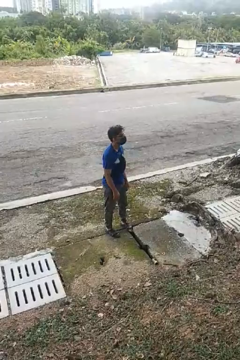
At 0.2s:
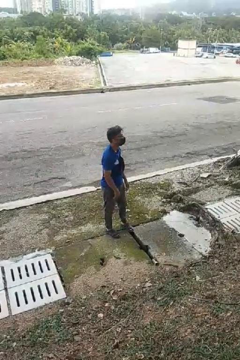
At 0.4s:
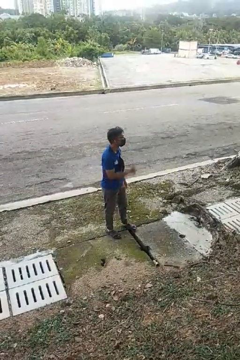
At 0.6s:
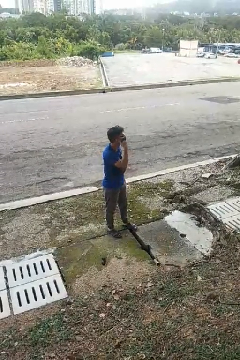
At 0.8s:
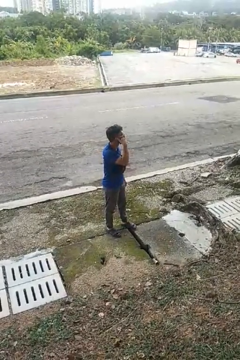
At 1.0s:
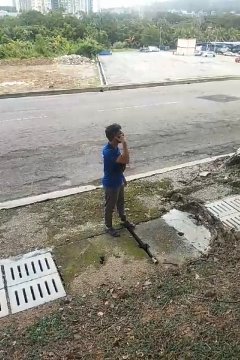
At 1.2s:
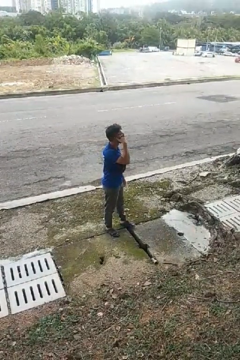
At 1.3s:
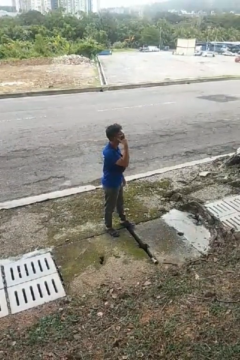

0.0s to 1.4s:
person gestures call me

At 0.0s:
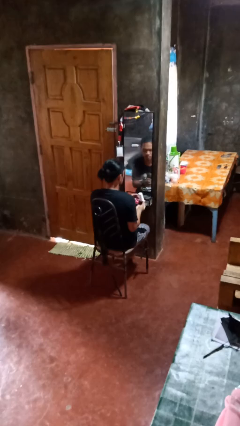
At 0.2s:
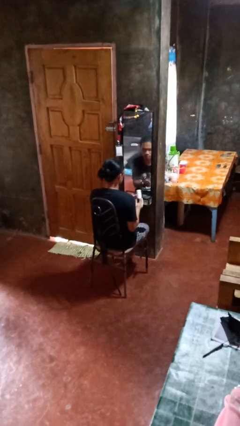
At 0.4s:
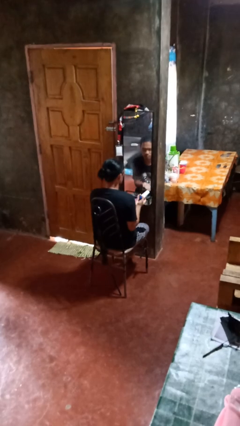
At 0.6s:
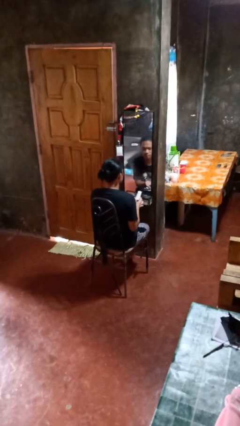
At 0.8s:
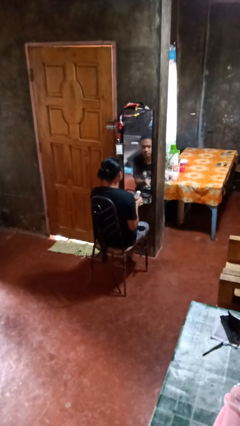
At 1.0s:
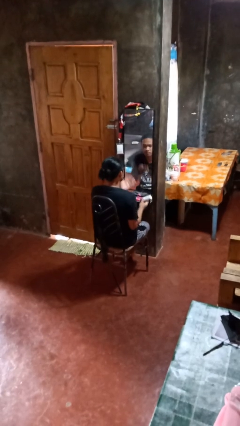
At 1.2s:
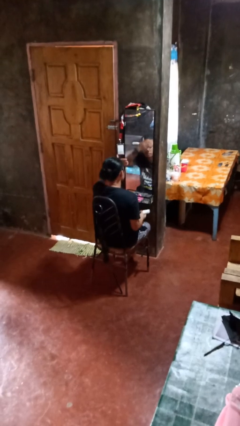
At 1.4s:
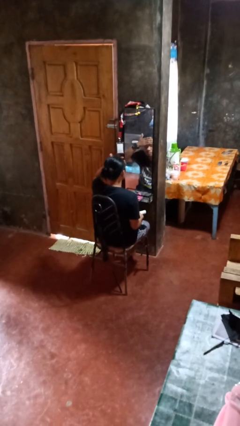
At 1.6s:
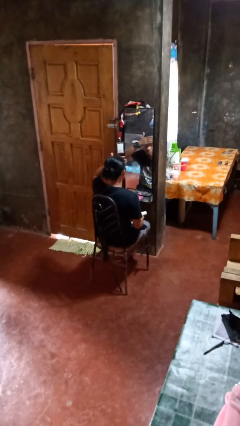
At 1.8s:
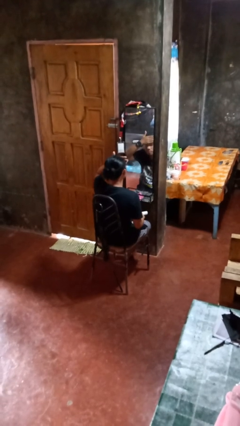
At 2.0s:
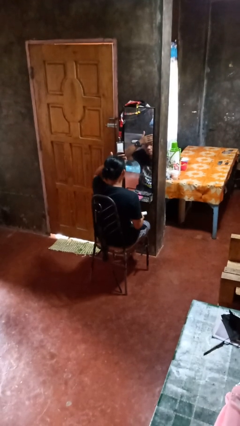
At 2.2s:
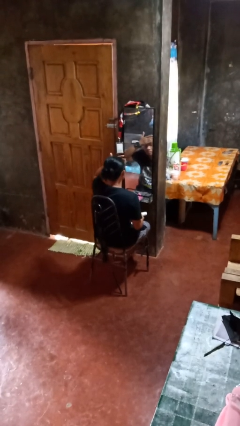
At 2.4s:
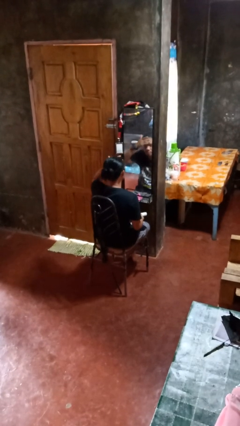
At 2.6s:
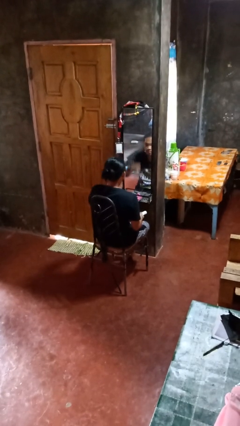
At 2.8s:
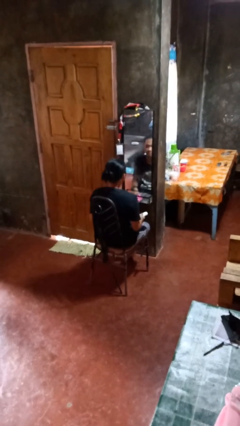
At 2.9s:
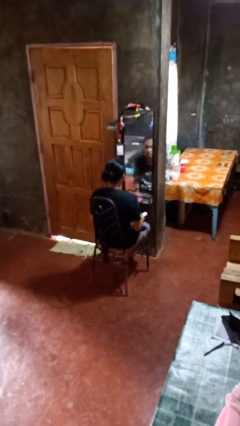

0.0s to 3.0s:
person applies foundation makeup

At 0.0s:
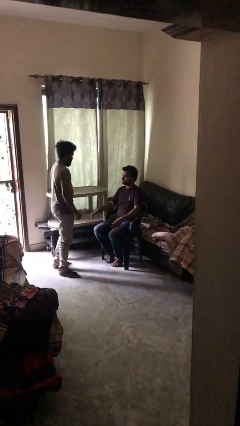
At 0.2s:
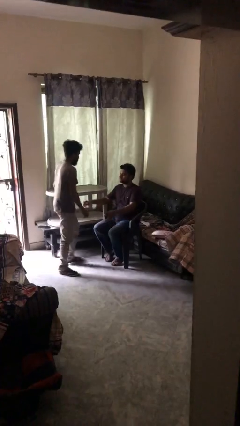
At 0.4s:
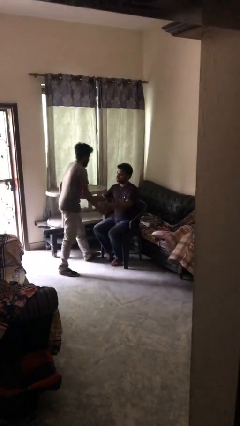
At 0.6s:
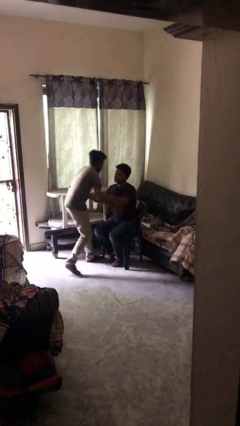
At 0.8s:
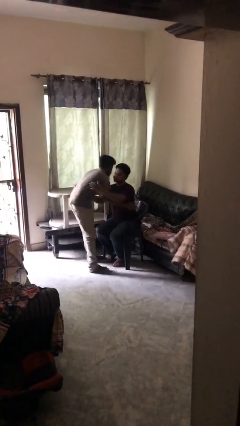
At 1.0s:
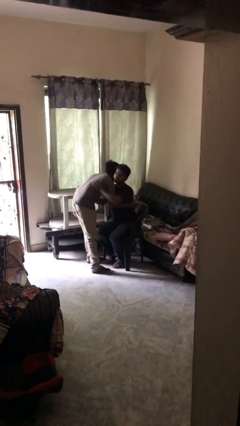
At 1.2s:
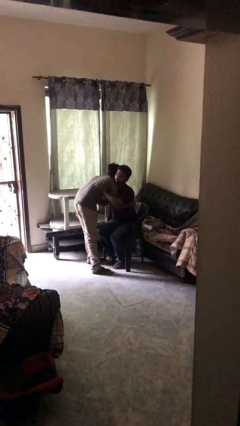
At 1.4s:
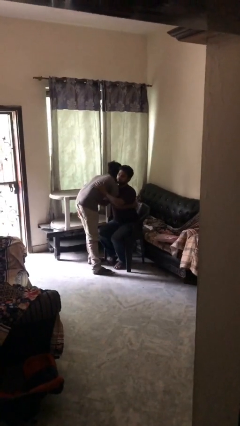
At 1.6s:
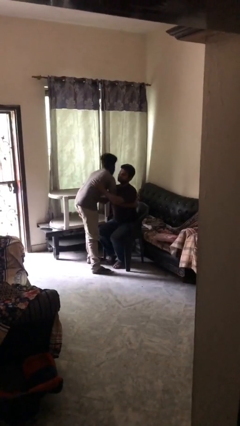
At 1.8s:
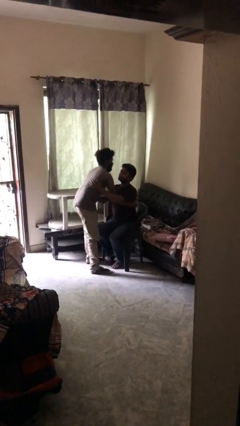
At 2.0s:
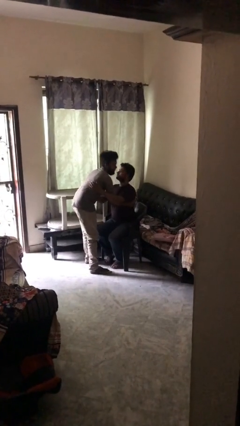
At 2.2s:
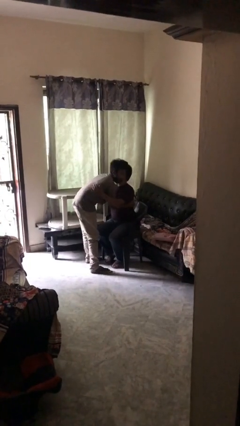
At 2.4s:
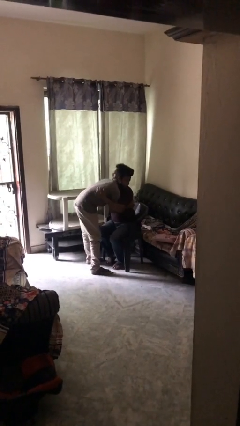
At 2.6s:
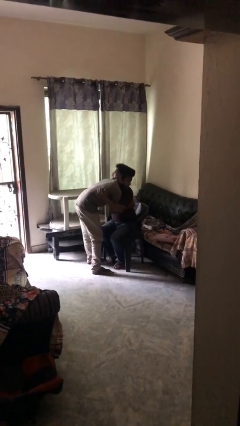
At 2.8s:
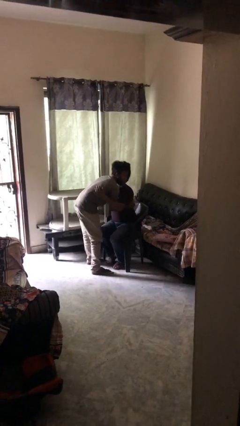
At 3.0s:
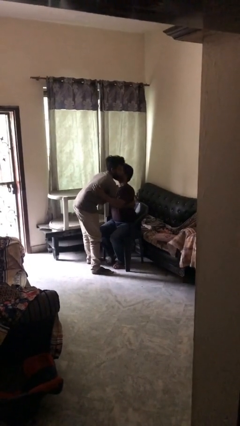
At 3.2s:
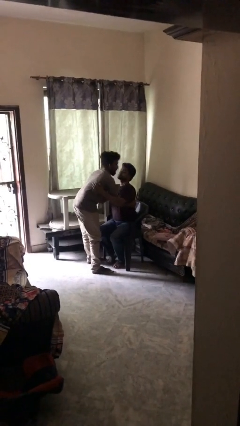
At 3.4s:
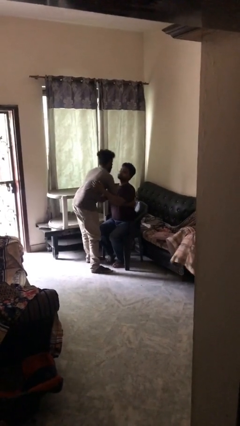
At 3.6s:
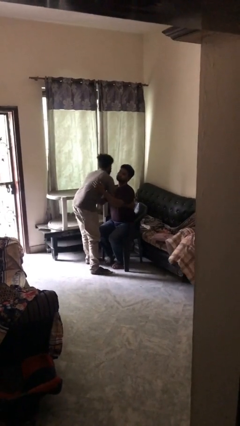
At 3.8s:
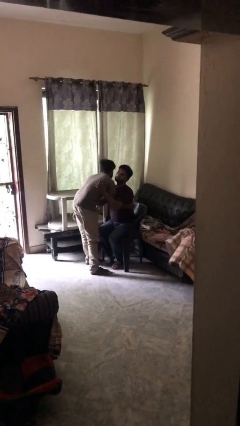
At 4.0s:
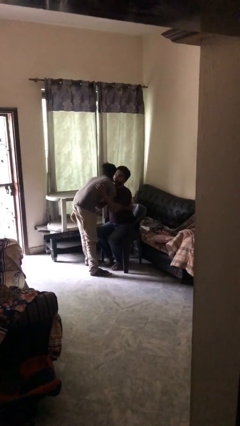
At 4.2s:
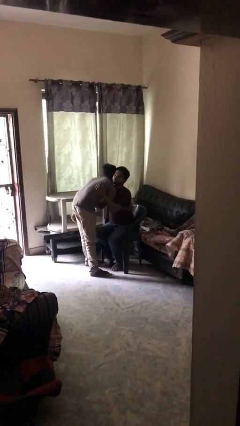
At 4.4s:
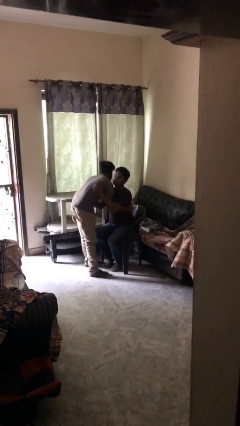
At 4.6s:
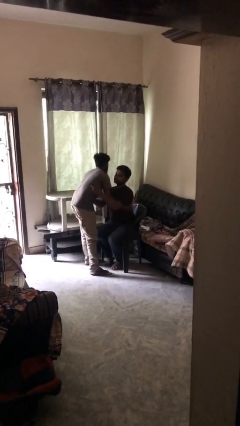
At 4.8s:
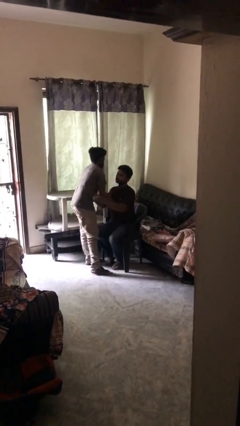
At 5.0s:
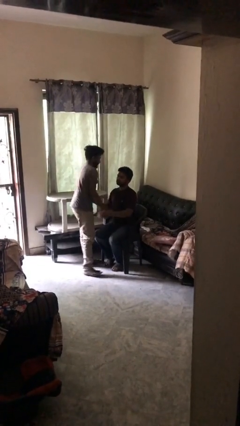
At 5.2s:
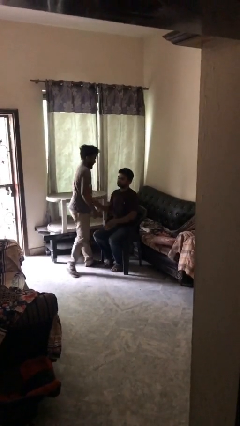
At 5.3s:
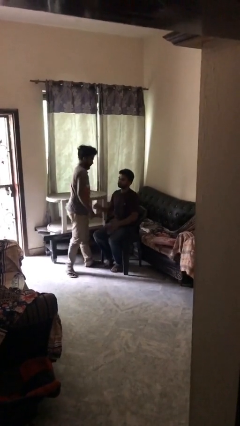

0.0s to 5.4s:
person embraces person

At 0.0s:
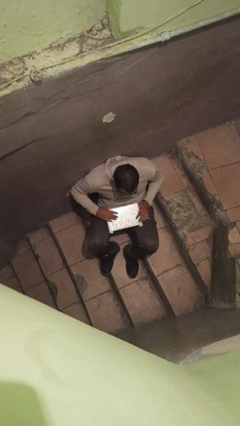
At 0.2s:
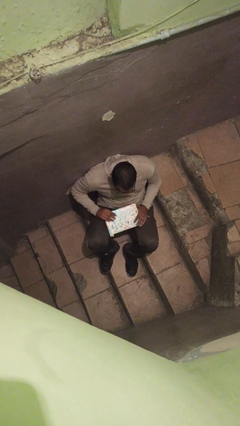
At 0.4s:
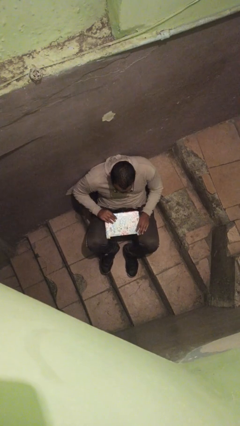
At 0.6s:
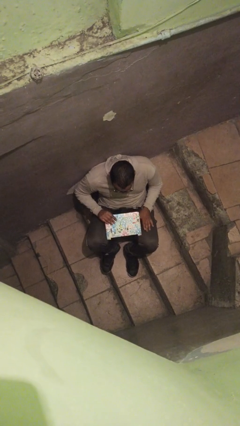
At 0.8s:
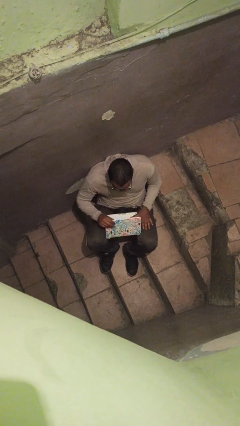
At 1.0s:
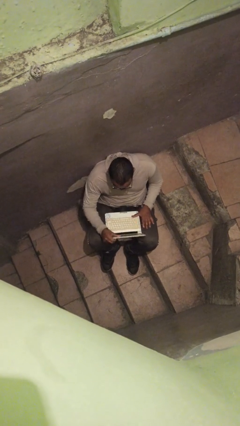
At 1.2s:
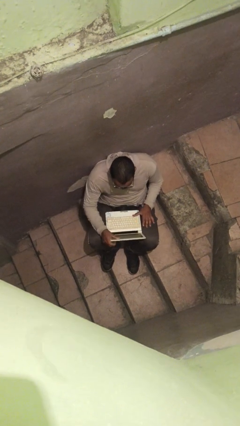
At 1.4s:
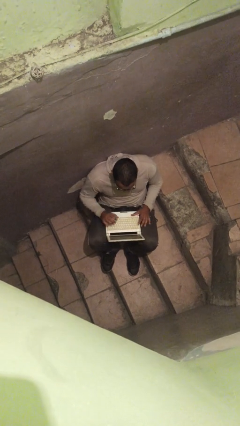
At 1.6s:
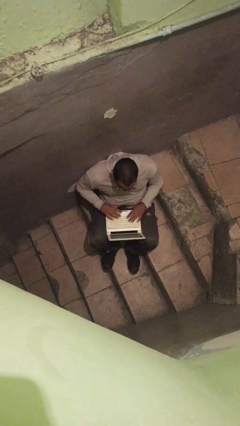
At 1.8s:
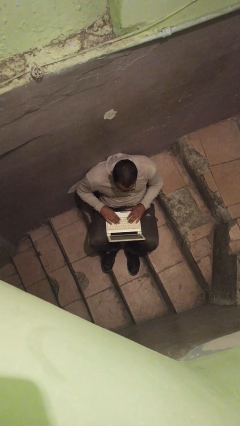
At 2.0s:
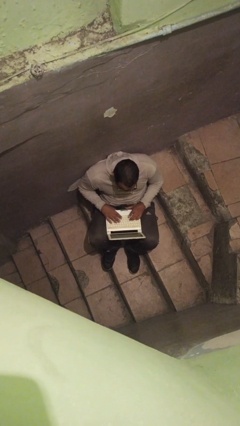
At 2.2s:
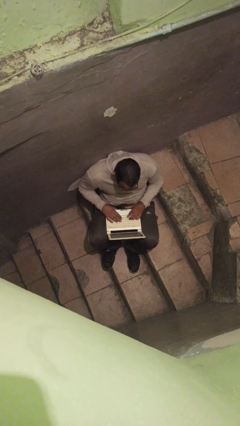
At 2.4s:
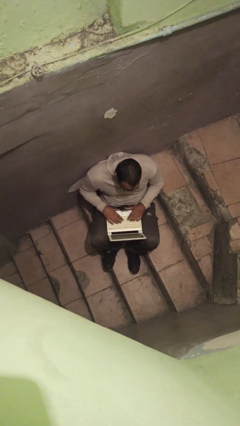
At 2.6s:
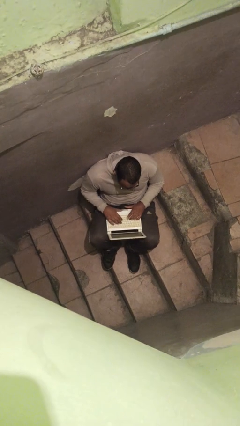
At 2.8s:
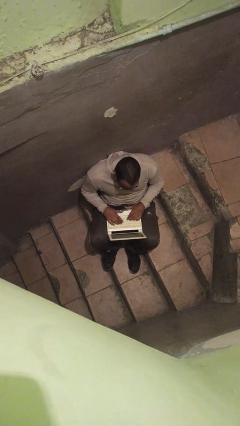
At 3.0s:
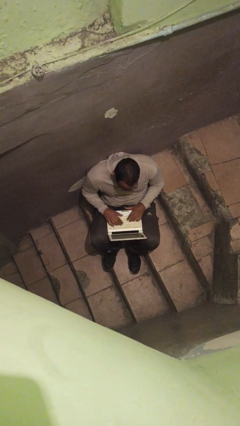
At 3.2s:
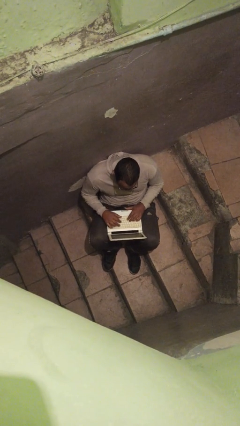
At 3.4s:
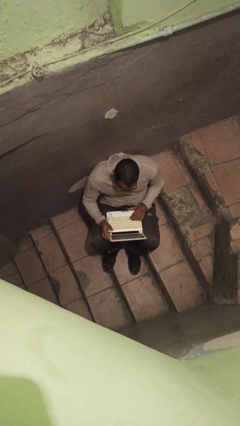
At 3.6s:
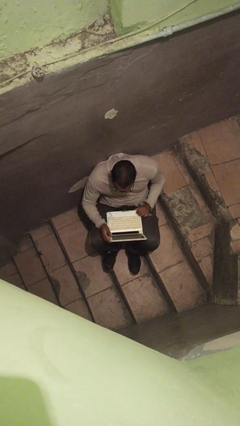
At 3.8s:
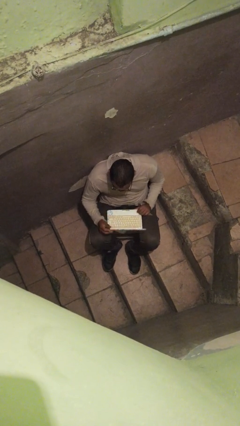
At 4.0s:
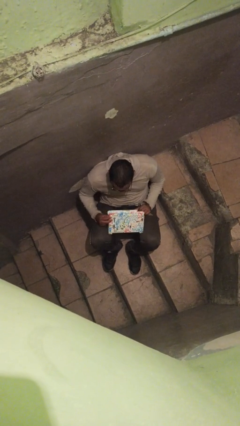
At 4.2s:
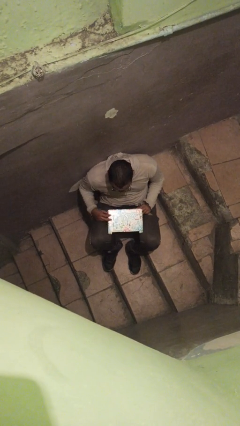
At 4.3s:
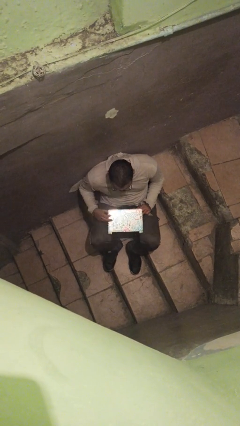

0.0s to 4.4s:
person interacts with laptop

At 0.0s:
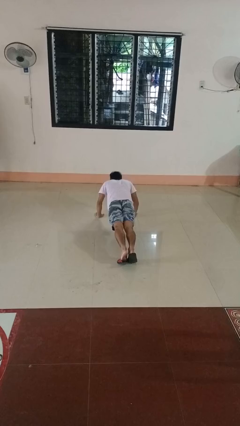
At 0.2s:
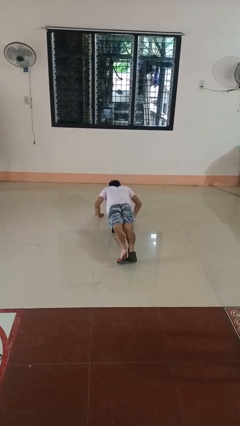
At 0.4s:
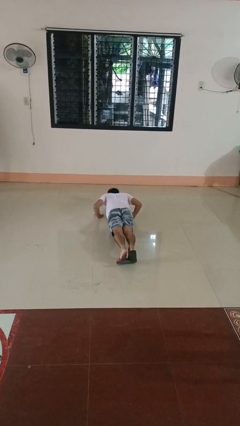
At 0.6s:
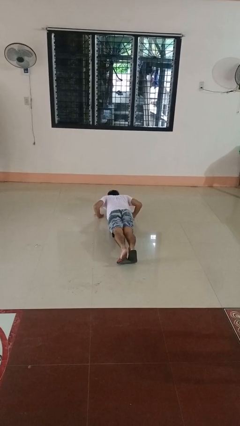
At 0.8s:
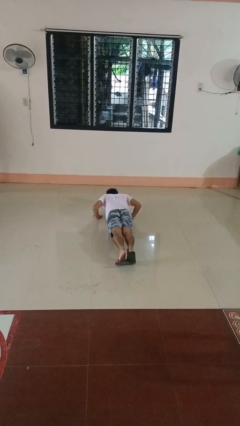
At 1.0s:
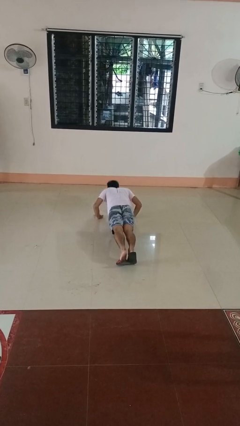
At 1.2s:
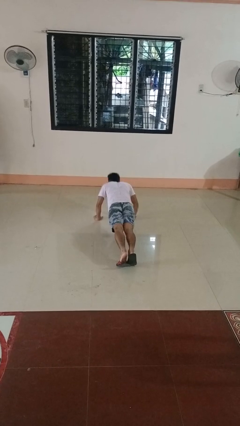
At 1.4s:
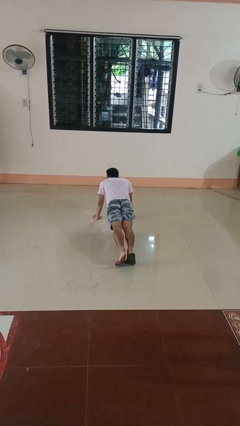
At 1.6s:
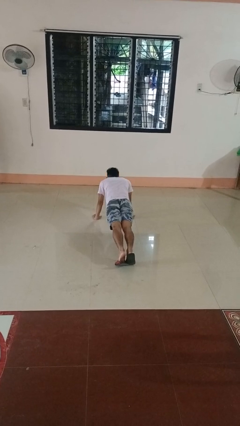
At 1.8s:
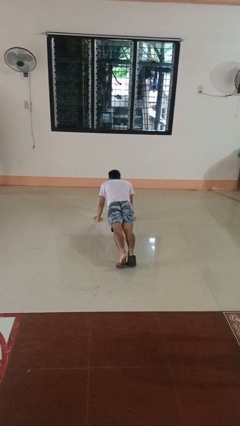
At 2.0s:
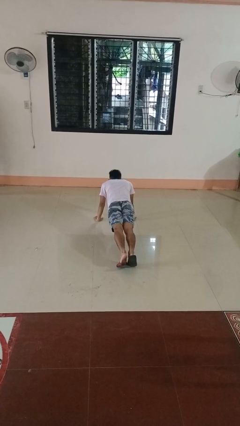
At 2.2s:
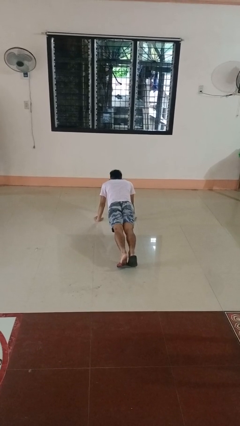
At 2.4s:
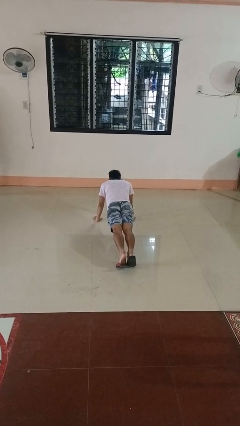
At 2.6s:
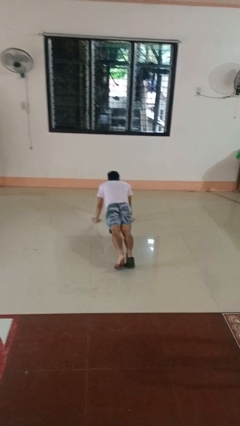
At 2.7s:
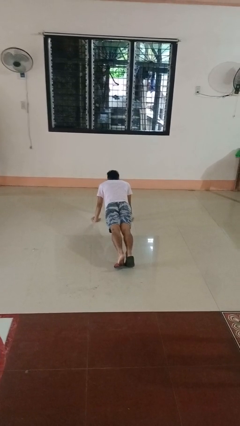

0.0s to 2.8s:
person exercises with pushup

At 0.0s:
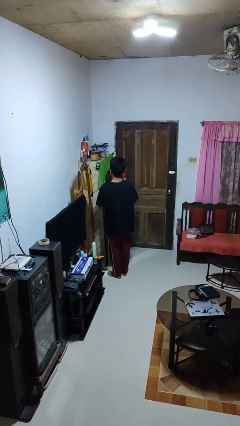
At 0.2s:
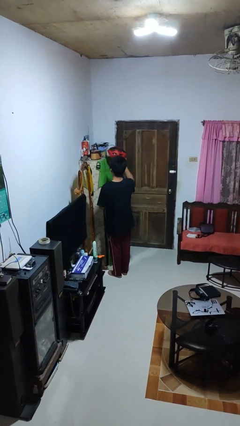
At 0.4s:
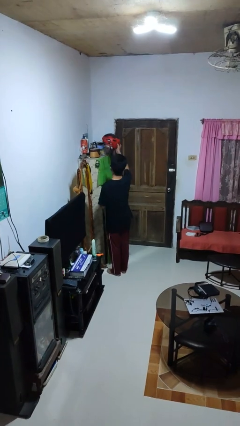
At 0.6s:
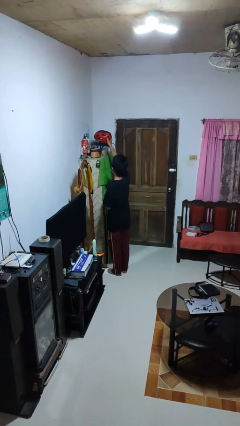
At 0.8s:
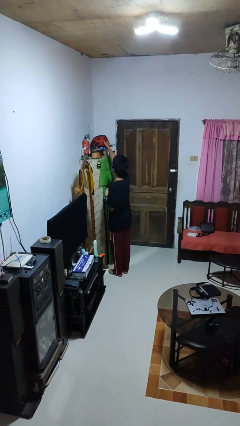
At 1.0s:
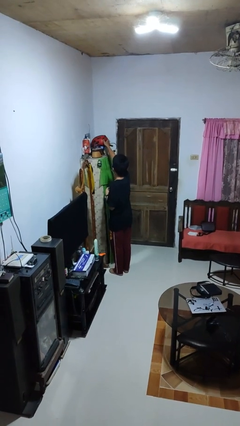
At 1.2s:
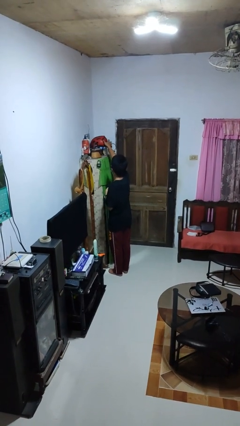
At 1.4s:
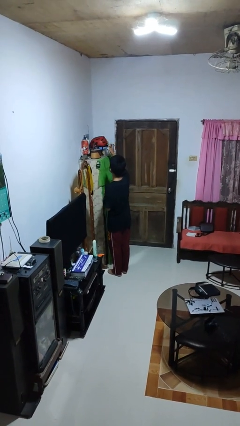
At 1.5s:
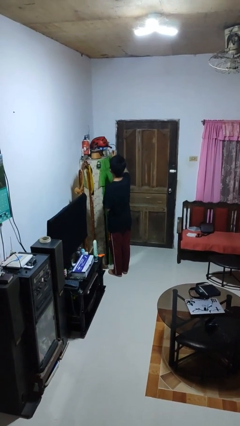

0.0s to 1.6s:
person puts down object on shelf
